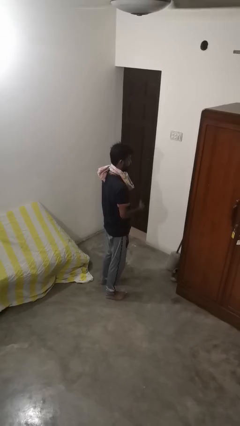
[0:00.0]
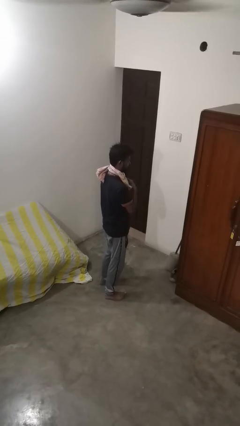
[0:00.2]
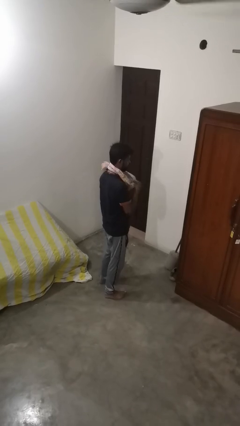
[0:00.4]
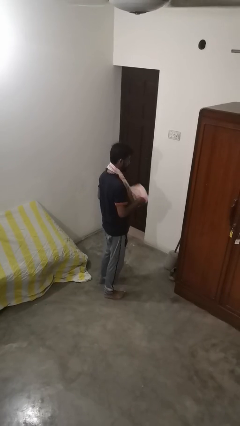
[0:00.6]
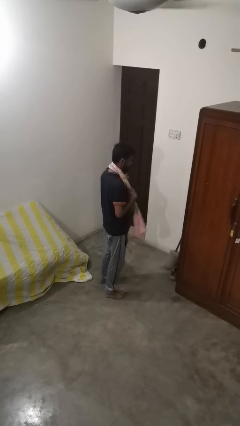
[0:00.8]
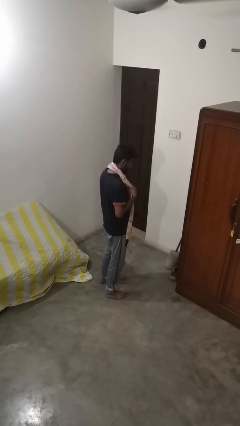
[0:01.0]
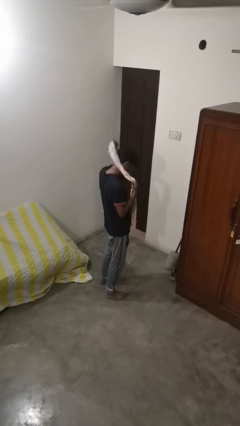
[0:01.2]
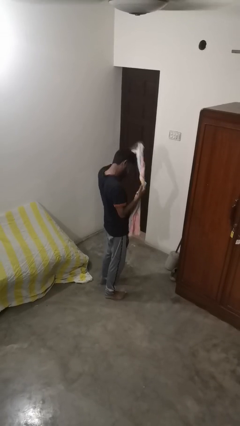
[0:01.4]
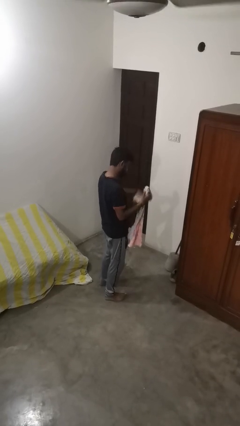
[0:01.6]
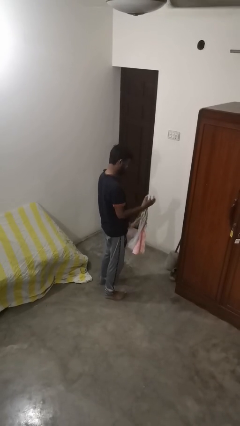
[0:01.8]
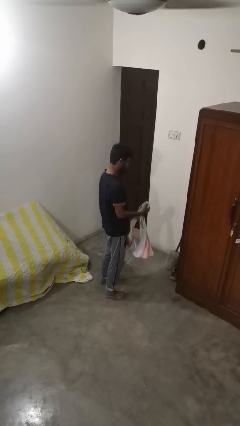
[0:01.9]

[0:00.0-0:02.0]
person takes off scarf

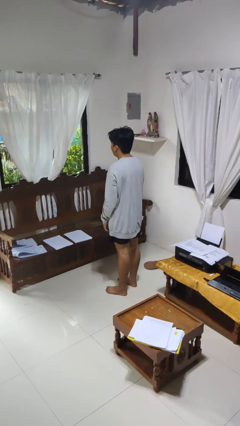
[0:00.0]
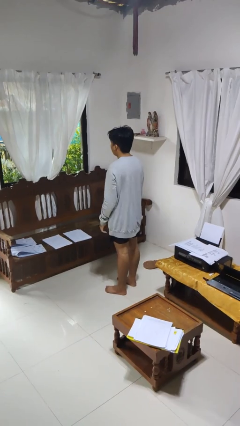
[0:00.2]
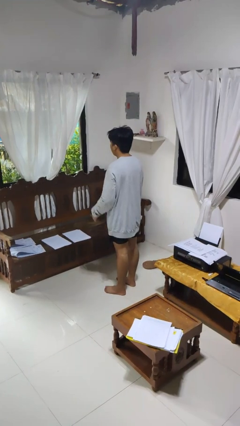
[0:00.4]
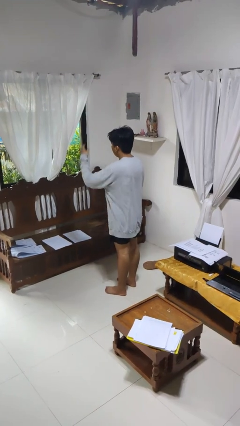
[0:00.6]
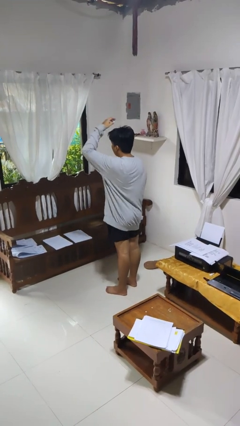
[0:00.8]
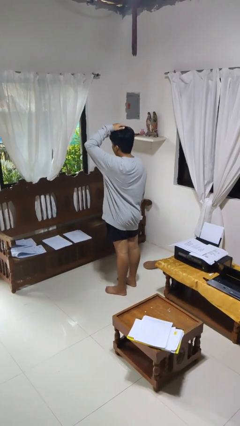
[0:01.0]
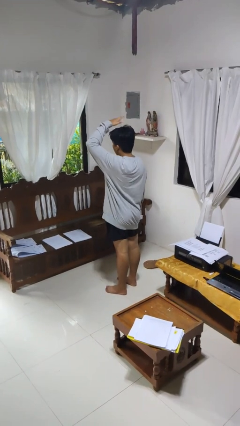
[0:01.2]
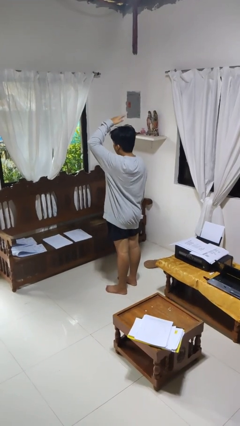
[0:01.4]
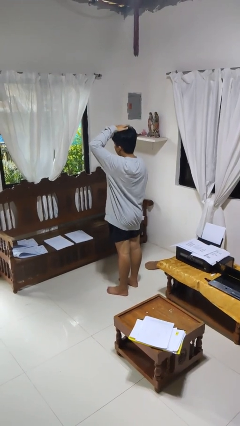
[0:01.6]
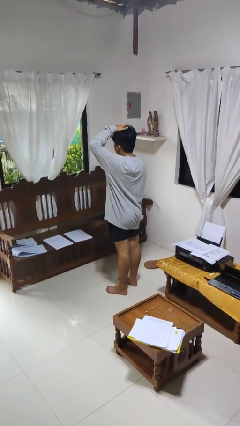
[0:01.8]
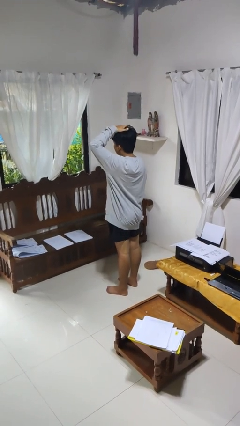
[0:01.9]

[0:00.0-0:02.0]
person pats head

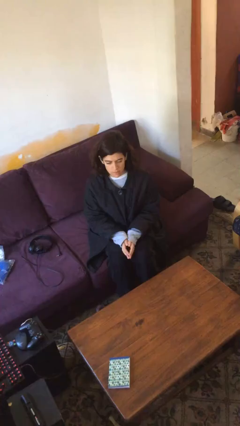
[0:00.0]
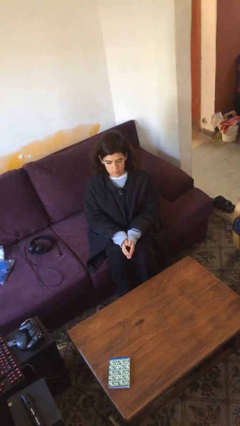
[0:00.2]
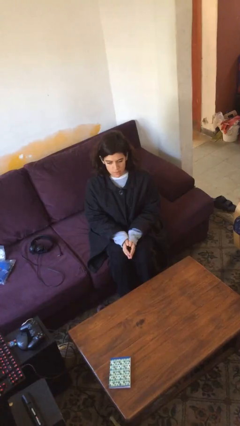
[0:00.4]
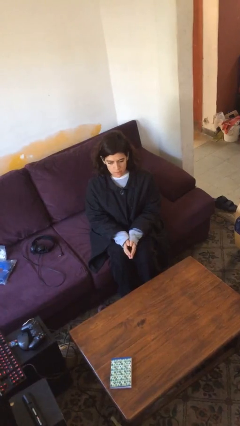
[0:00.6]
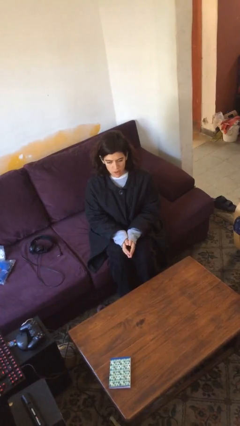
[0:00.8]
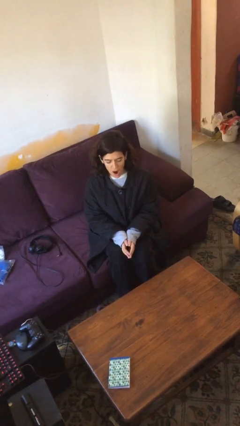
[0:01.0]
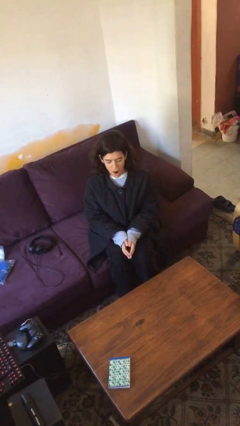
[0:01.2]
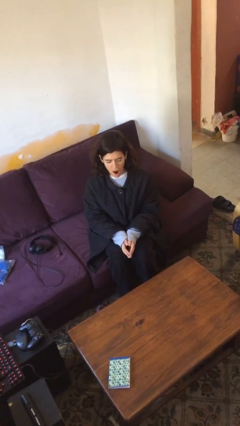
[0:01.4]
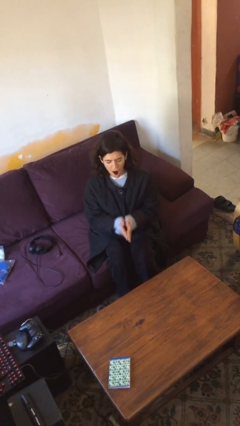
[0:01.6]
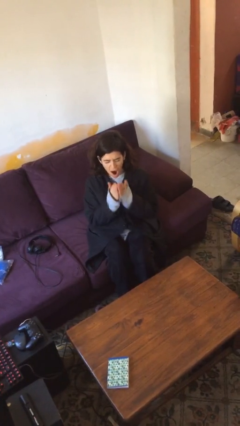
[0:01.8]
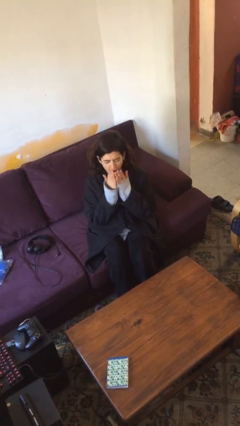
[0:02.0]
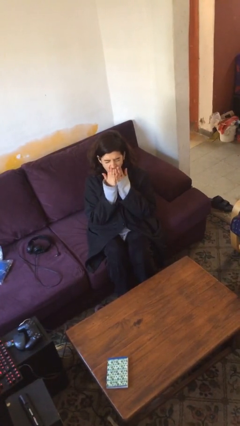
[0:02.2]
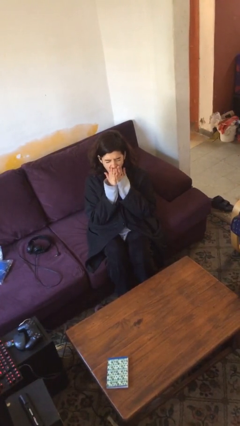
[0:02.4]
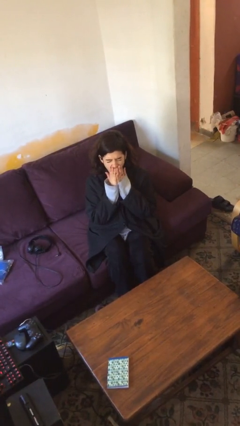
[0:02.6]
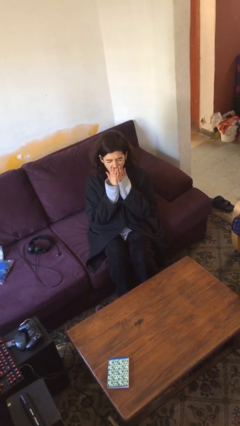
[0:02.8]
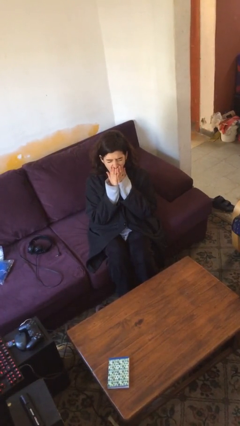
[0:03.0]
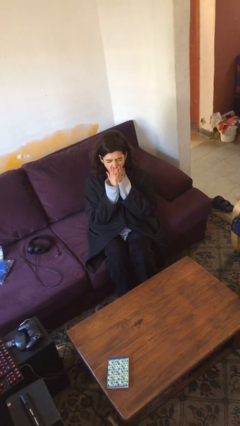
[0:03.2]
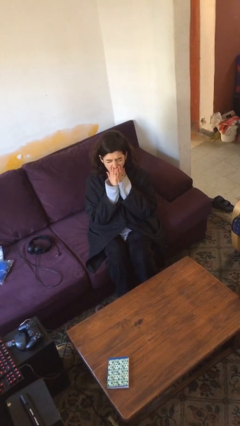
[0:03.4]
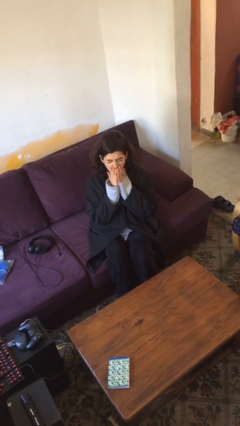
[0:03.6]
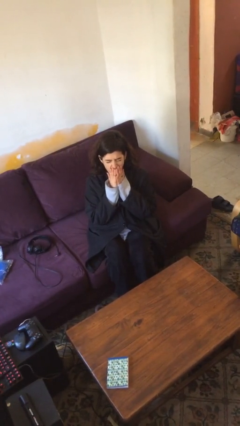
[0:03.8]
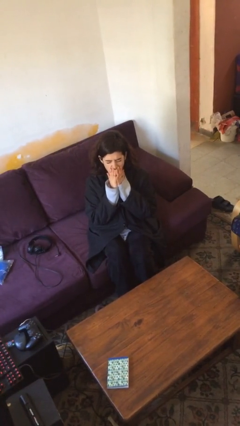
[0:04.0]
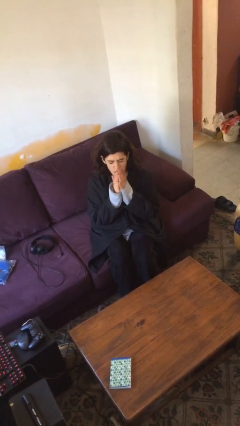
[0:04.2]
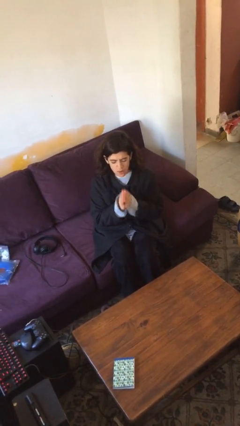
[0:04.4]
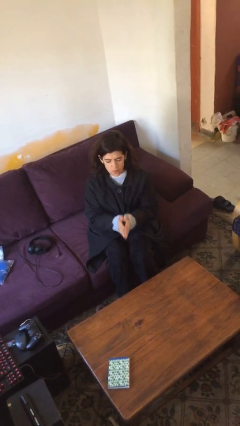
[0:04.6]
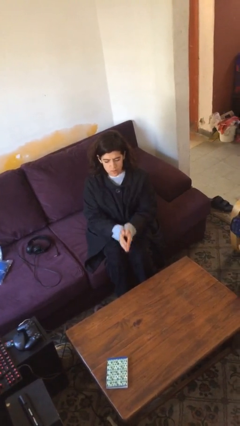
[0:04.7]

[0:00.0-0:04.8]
person yawns

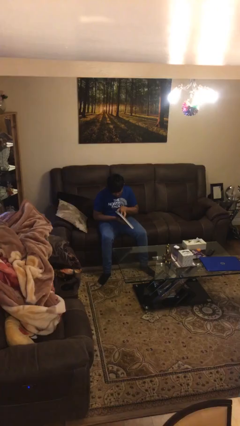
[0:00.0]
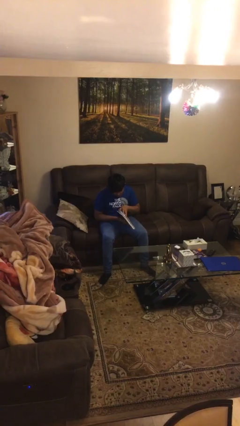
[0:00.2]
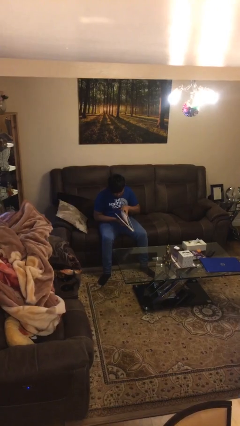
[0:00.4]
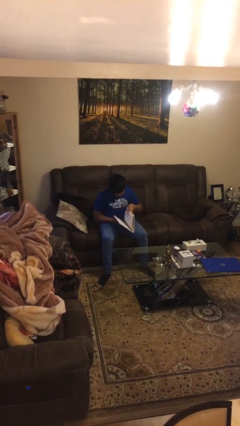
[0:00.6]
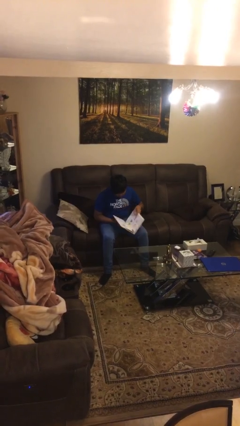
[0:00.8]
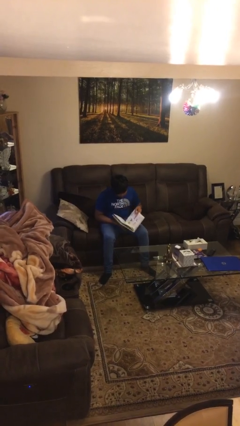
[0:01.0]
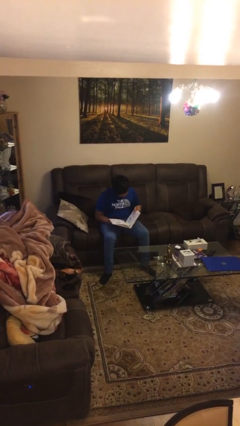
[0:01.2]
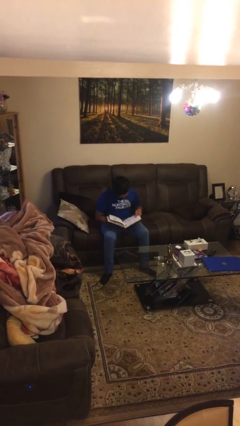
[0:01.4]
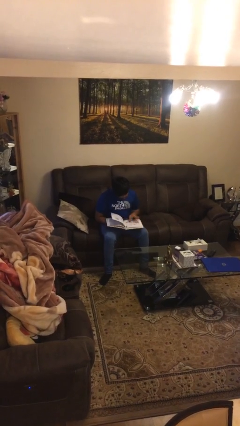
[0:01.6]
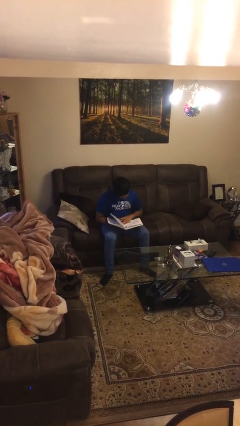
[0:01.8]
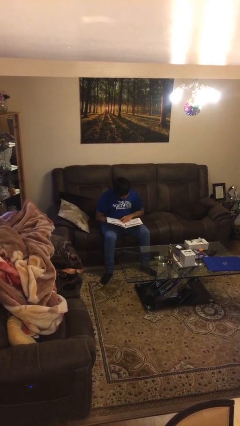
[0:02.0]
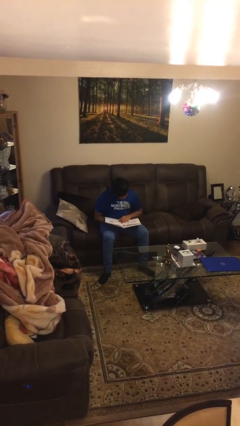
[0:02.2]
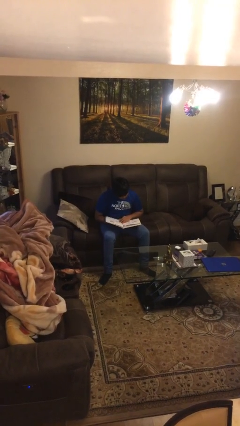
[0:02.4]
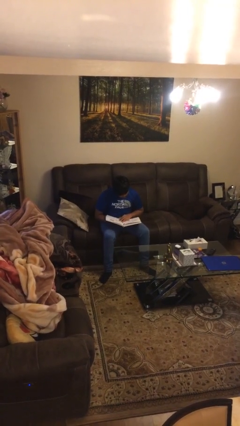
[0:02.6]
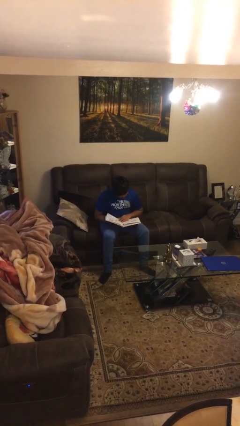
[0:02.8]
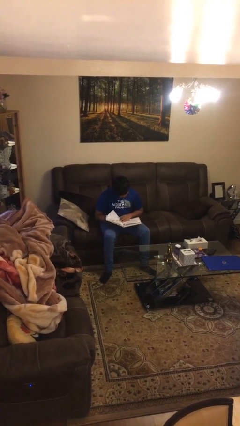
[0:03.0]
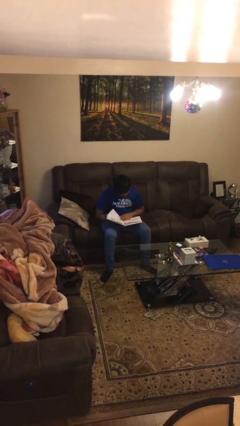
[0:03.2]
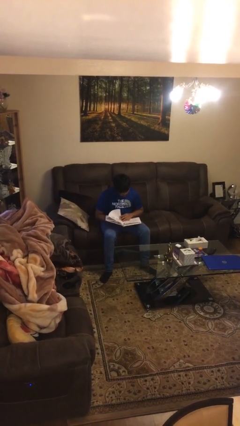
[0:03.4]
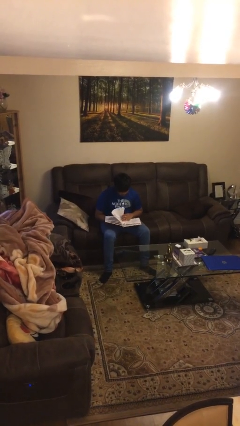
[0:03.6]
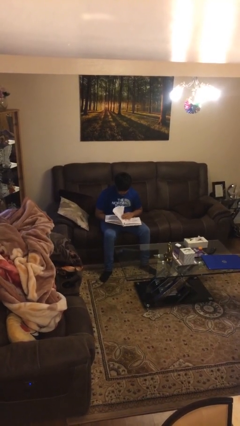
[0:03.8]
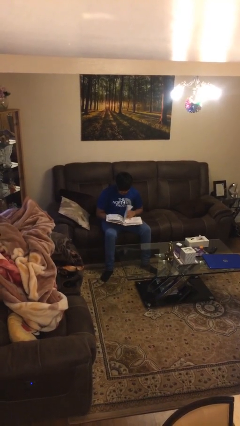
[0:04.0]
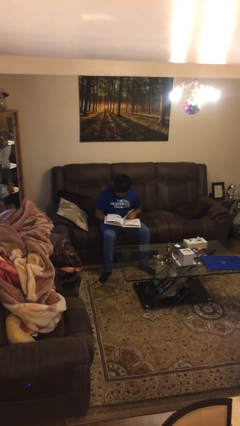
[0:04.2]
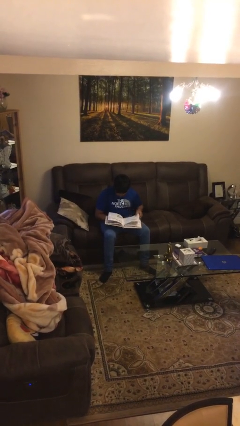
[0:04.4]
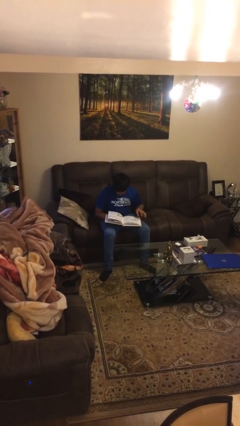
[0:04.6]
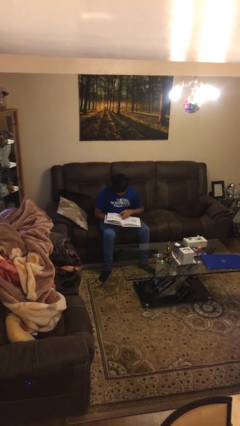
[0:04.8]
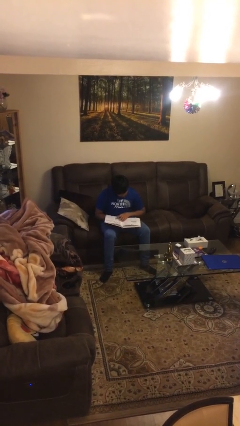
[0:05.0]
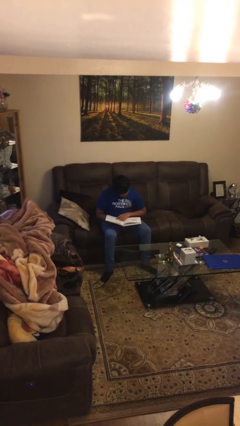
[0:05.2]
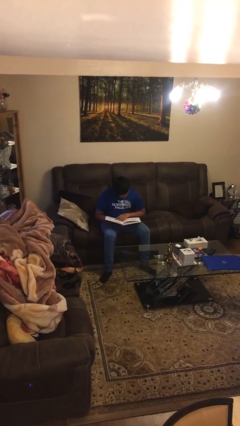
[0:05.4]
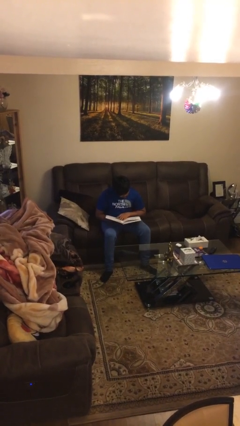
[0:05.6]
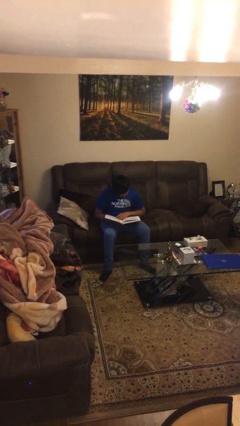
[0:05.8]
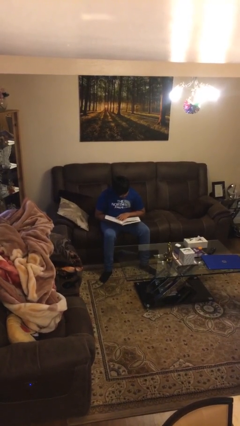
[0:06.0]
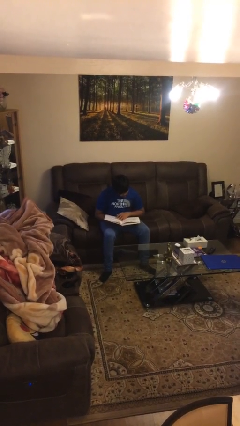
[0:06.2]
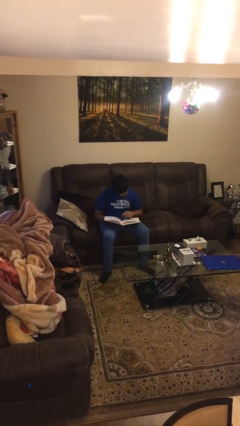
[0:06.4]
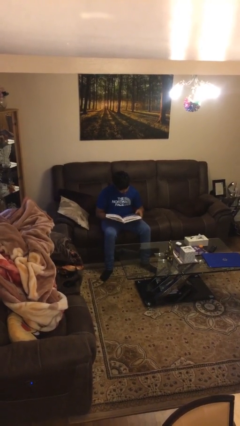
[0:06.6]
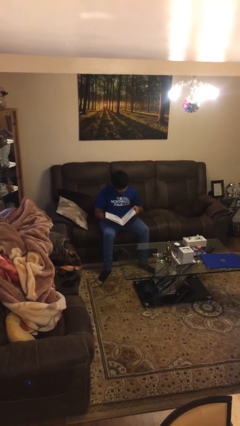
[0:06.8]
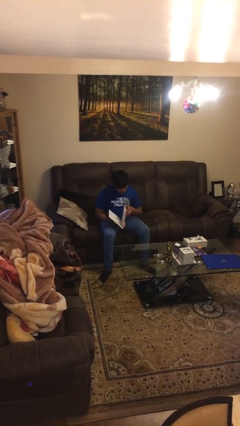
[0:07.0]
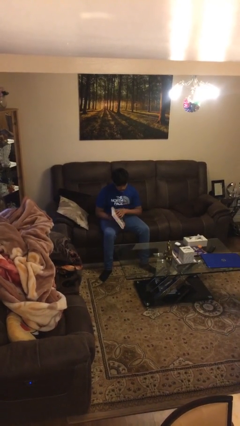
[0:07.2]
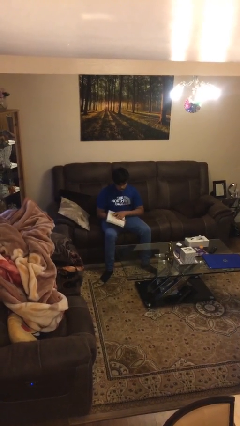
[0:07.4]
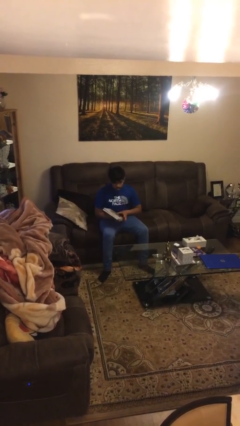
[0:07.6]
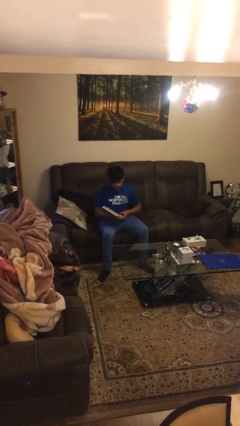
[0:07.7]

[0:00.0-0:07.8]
person reads document

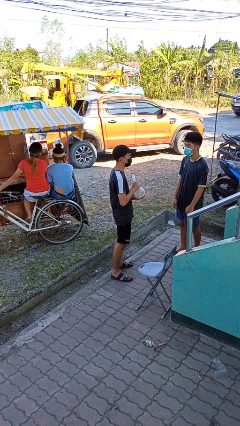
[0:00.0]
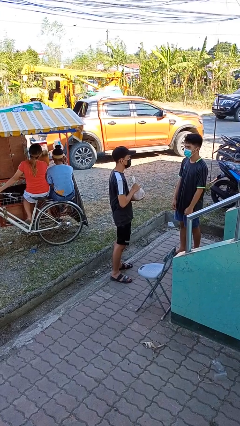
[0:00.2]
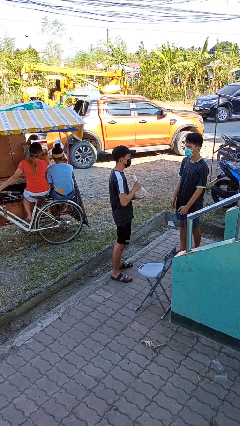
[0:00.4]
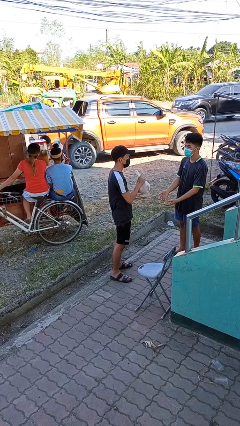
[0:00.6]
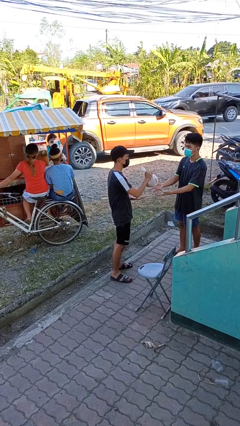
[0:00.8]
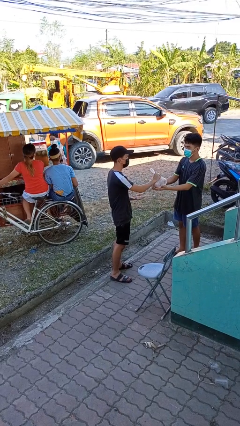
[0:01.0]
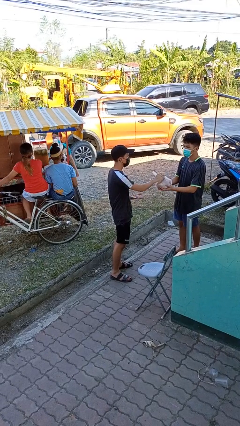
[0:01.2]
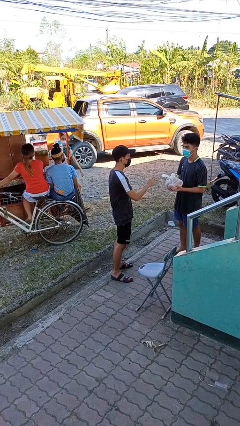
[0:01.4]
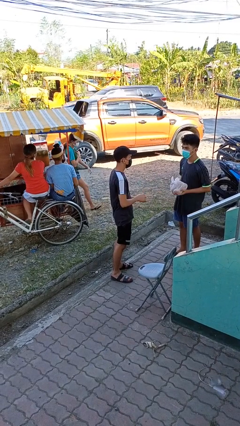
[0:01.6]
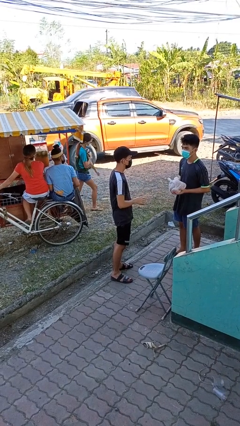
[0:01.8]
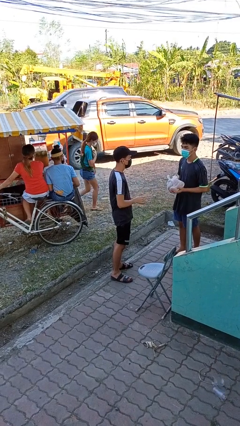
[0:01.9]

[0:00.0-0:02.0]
person transfers object to person
